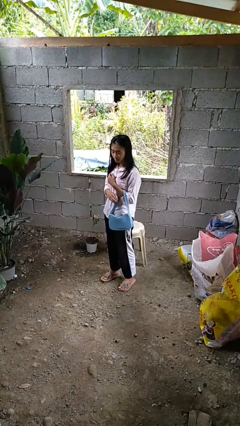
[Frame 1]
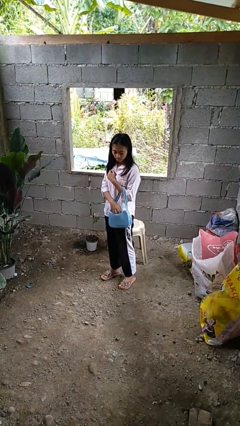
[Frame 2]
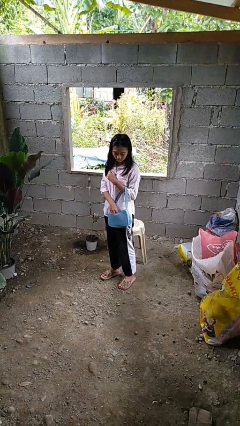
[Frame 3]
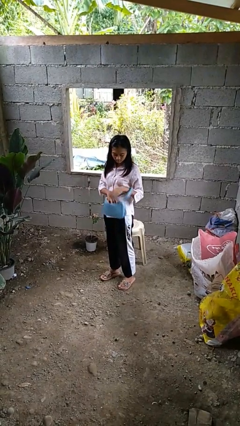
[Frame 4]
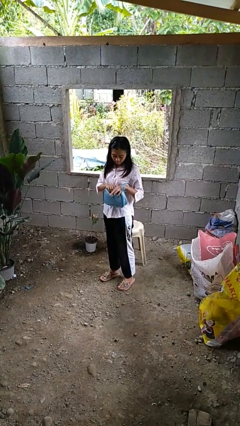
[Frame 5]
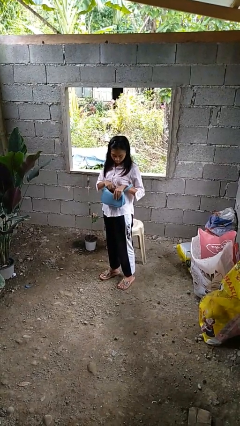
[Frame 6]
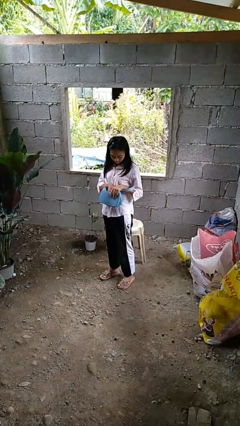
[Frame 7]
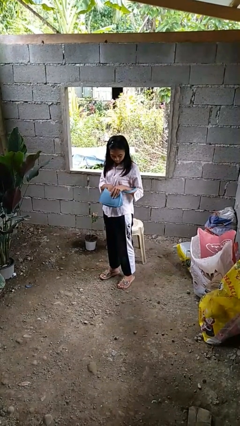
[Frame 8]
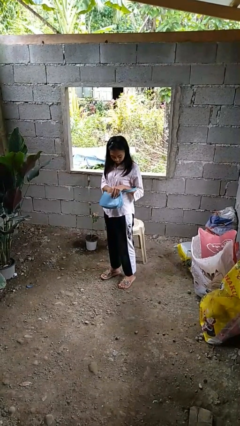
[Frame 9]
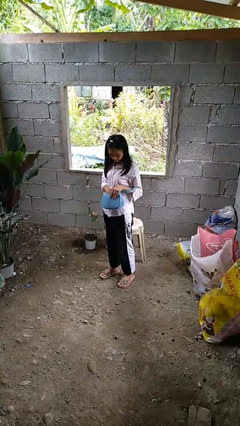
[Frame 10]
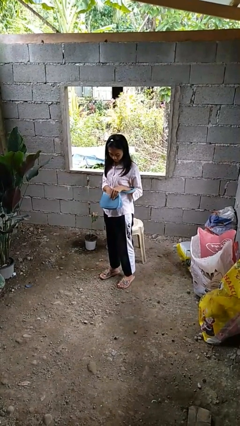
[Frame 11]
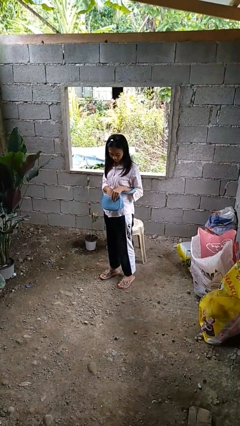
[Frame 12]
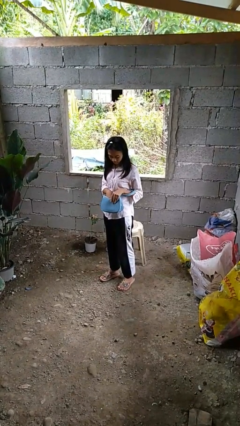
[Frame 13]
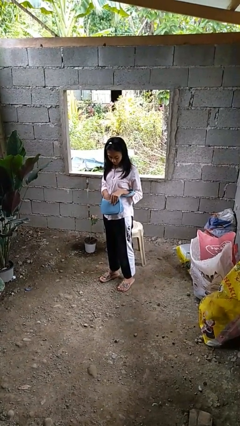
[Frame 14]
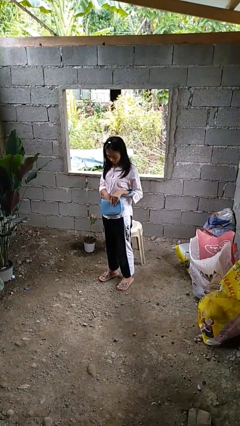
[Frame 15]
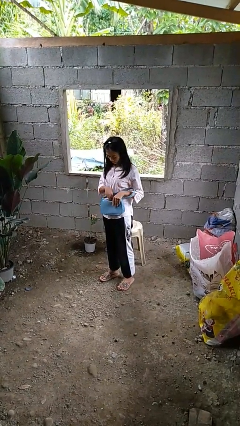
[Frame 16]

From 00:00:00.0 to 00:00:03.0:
person searches in purse

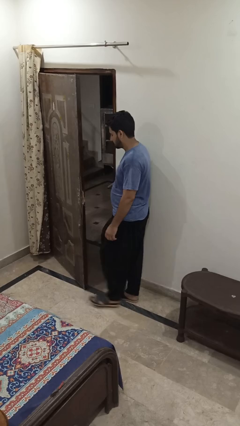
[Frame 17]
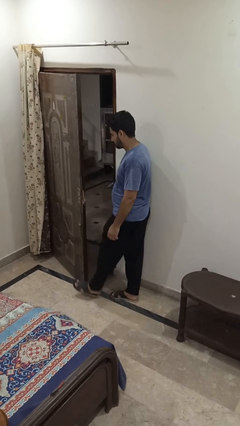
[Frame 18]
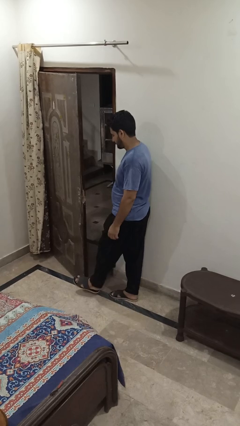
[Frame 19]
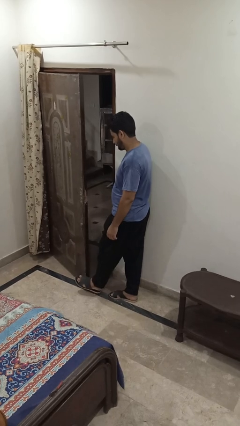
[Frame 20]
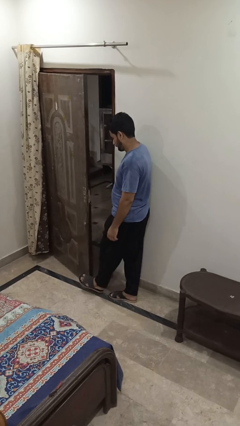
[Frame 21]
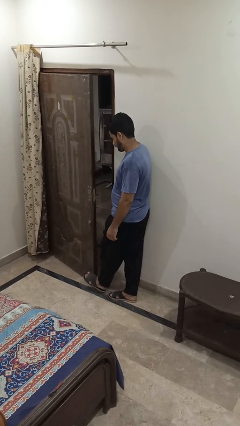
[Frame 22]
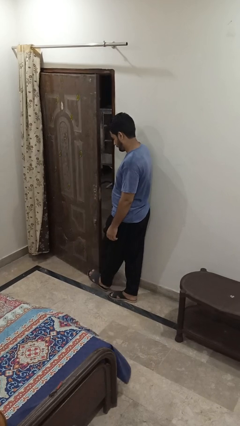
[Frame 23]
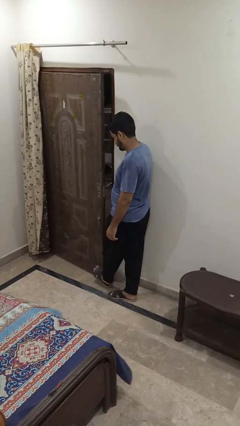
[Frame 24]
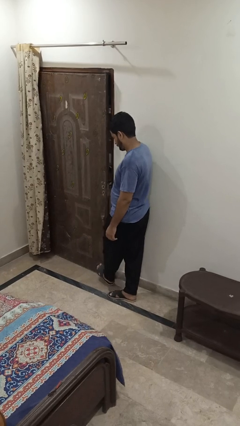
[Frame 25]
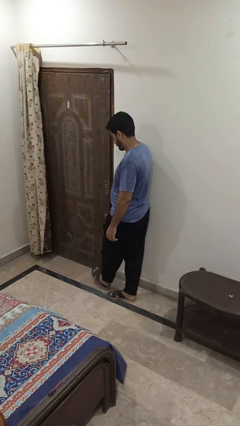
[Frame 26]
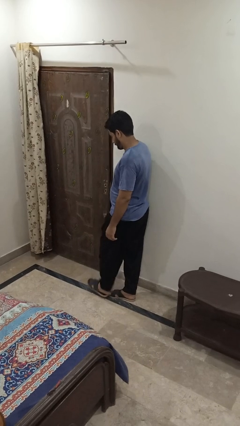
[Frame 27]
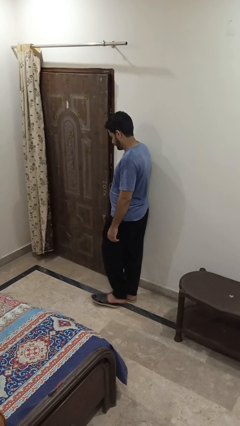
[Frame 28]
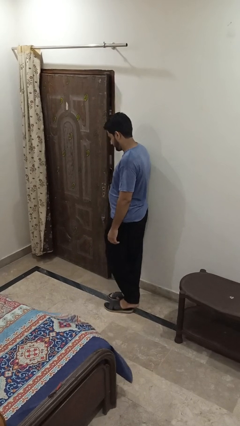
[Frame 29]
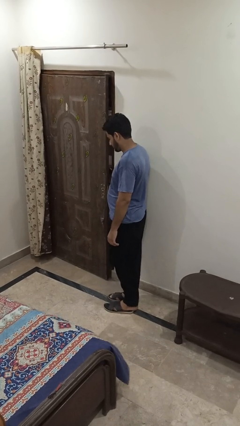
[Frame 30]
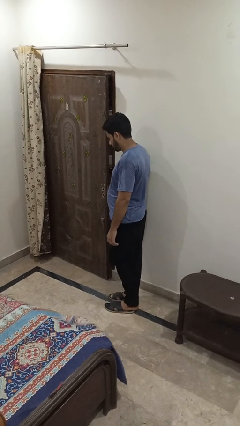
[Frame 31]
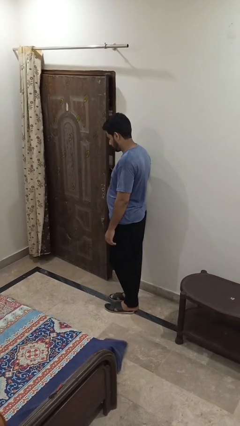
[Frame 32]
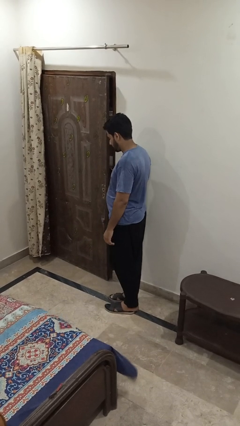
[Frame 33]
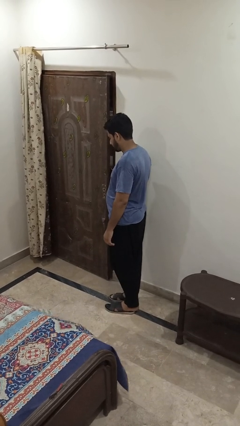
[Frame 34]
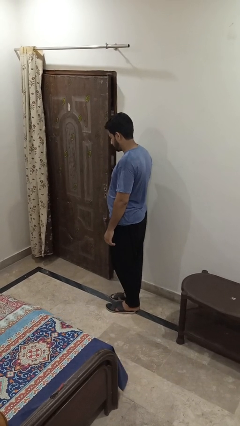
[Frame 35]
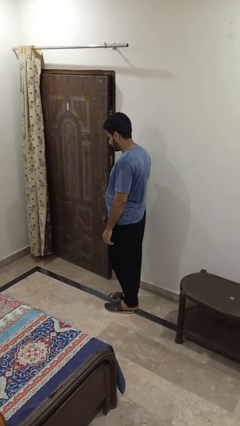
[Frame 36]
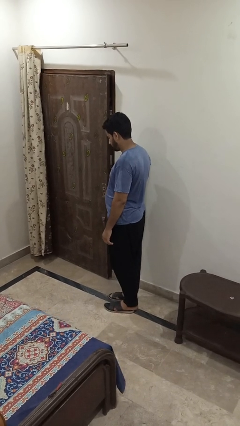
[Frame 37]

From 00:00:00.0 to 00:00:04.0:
person closes door with foot

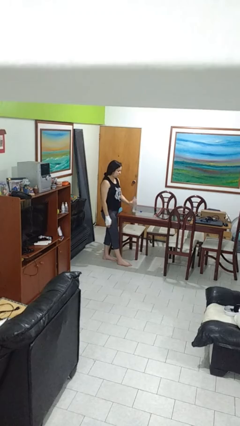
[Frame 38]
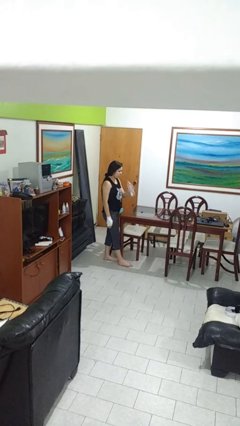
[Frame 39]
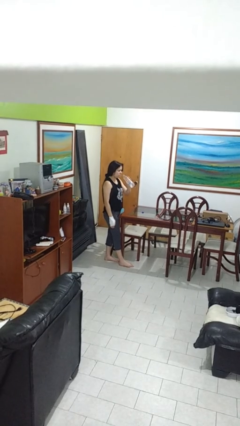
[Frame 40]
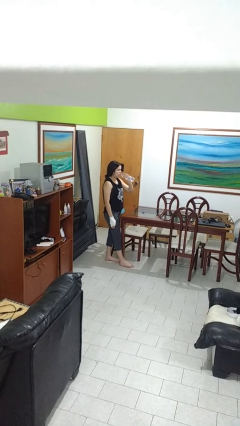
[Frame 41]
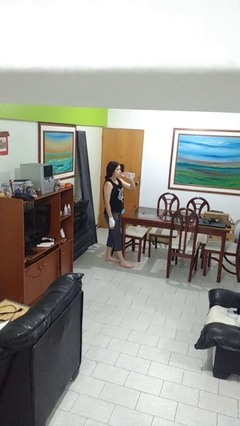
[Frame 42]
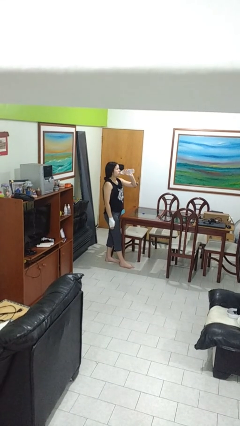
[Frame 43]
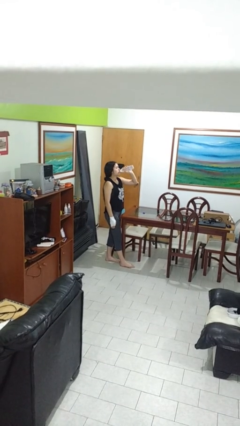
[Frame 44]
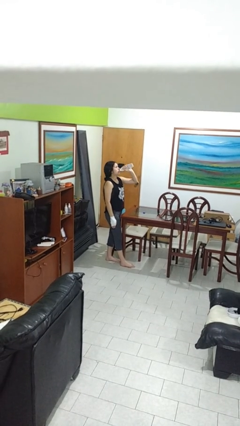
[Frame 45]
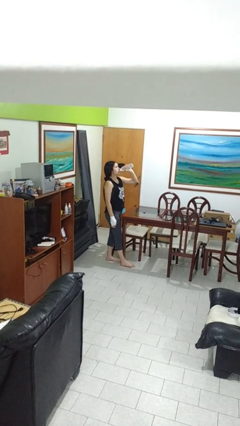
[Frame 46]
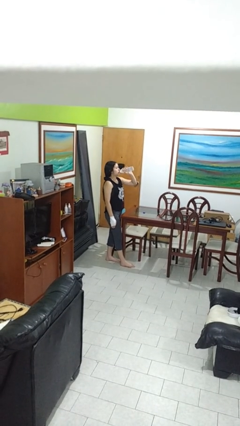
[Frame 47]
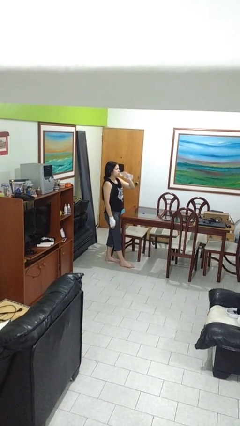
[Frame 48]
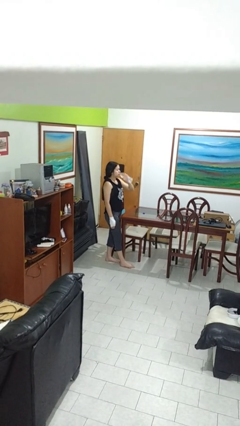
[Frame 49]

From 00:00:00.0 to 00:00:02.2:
person drinks from bottle

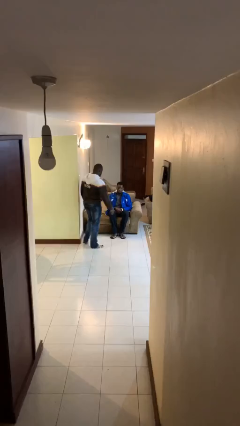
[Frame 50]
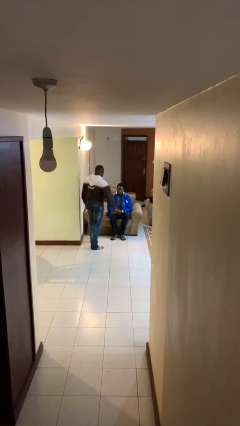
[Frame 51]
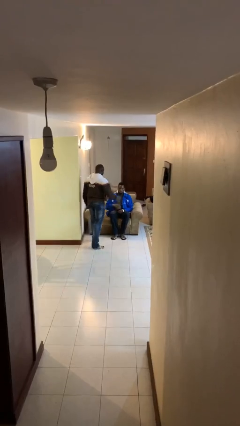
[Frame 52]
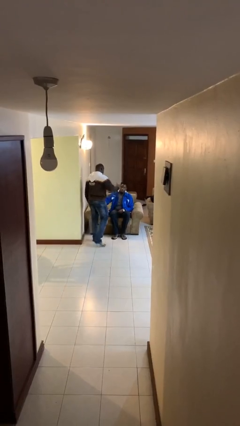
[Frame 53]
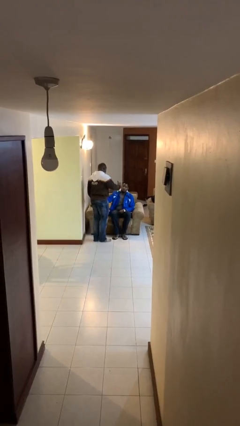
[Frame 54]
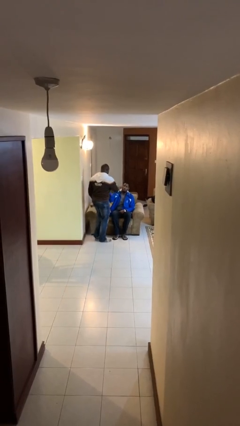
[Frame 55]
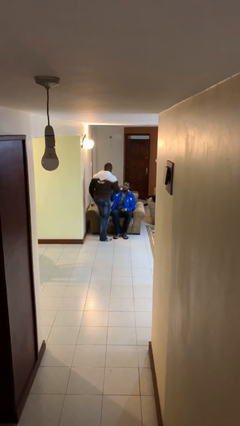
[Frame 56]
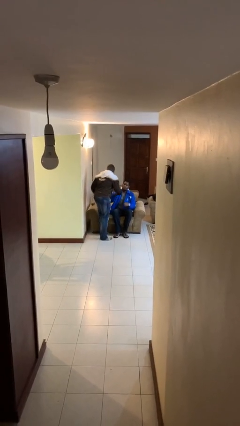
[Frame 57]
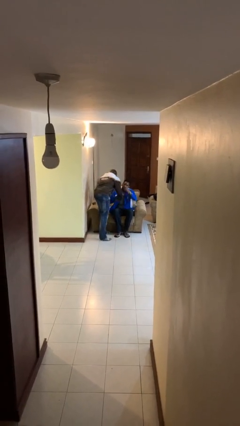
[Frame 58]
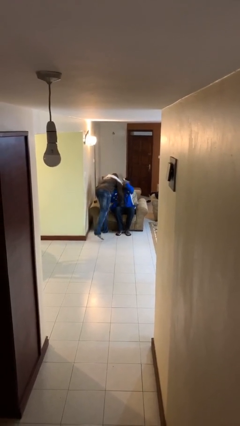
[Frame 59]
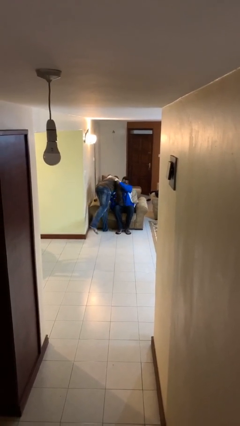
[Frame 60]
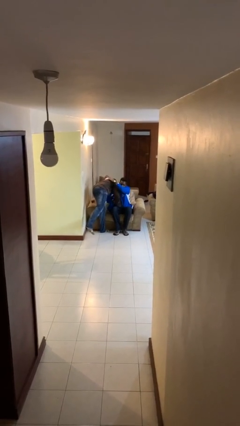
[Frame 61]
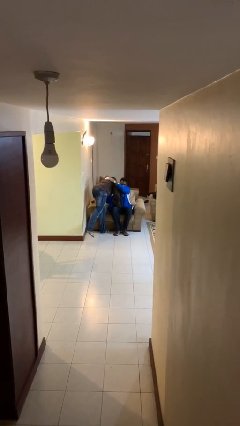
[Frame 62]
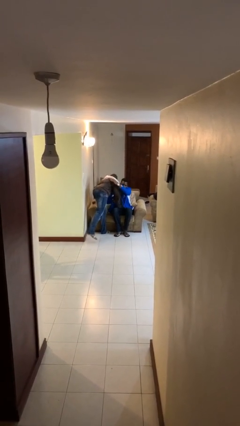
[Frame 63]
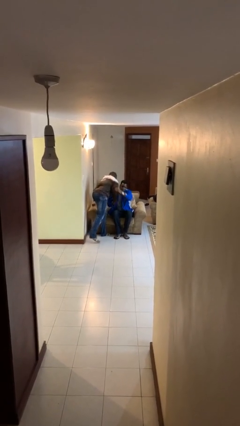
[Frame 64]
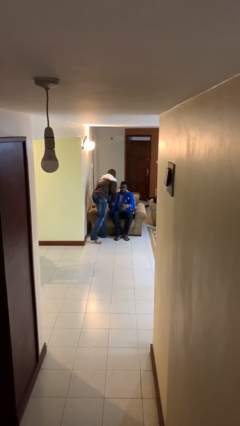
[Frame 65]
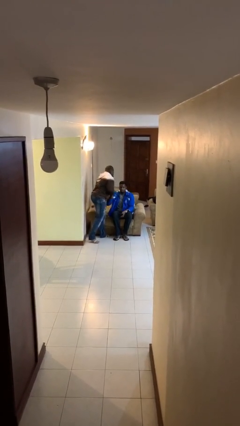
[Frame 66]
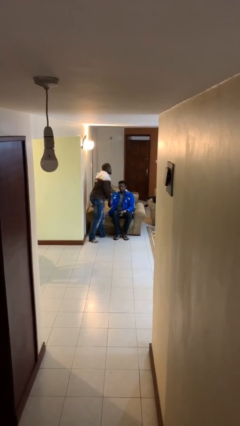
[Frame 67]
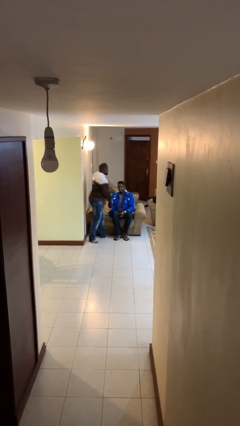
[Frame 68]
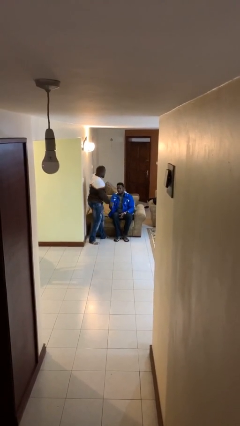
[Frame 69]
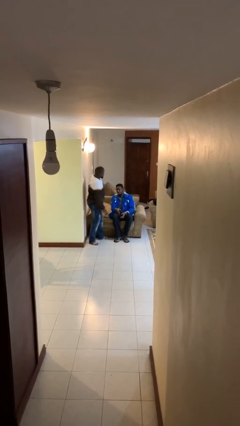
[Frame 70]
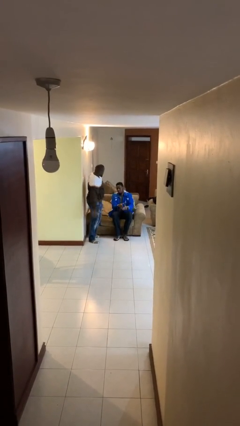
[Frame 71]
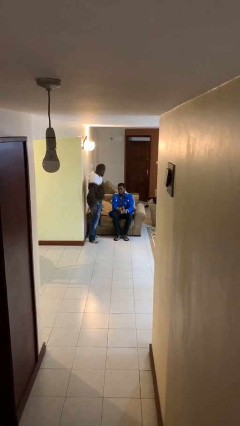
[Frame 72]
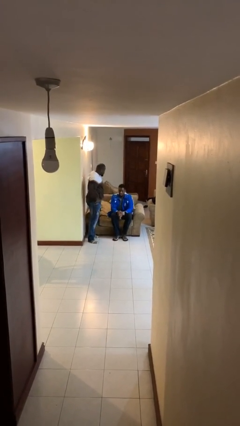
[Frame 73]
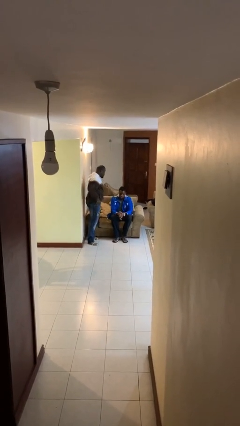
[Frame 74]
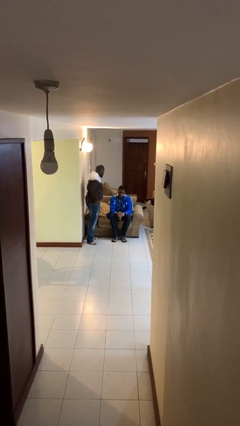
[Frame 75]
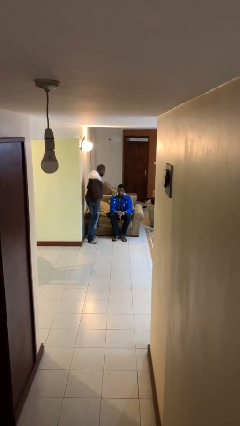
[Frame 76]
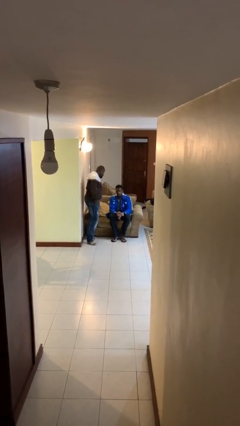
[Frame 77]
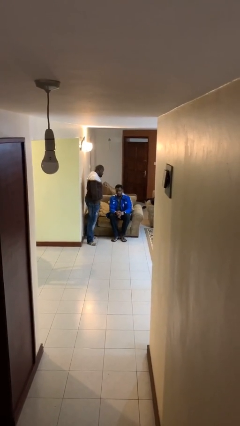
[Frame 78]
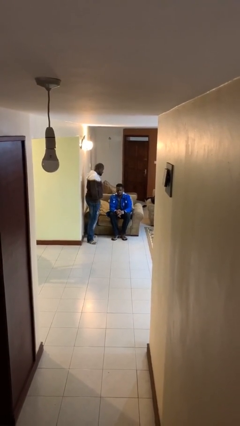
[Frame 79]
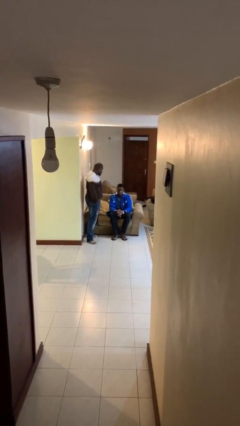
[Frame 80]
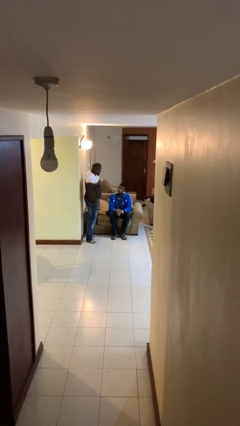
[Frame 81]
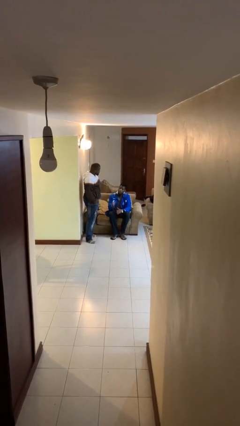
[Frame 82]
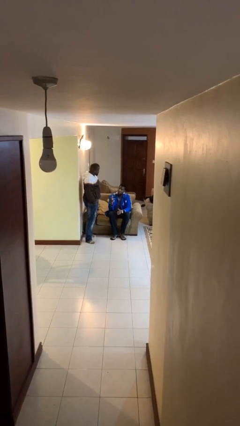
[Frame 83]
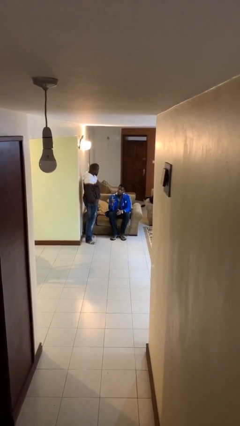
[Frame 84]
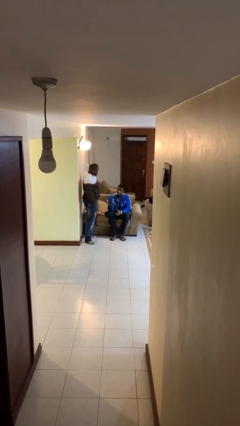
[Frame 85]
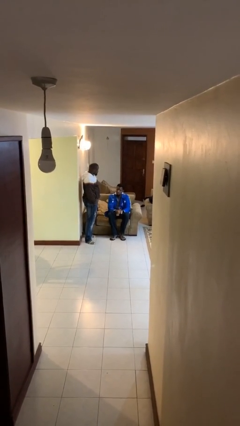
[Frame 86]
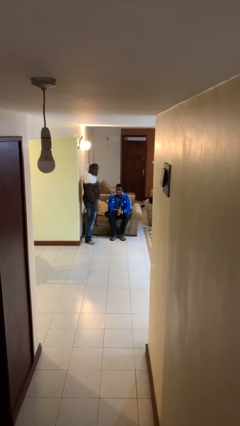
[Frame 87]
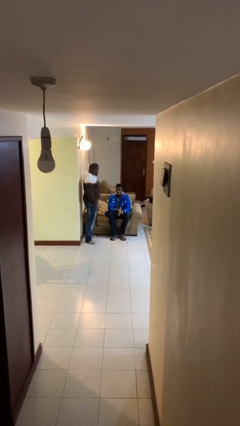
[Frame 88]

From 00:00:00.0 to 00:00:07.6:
person embraces person

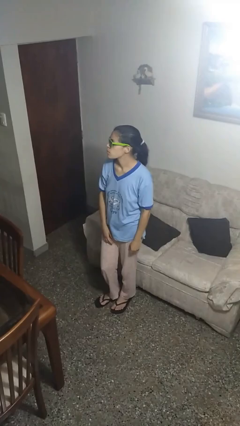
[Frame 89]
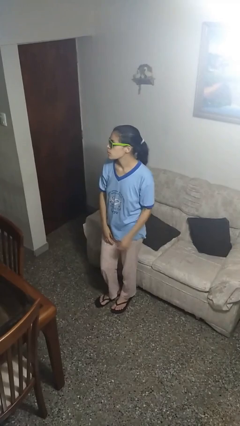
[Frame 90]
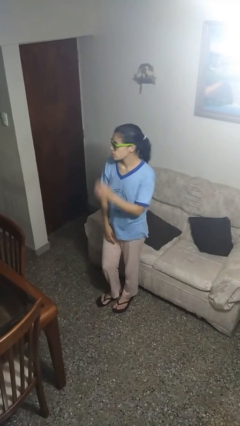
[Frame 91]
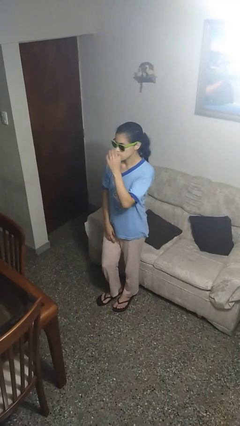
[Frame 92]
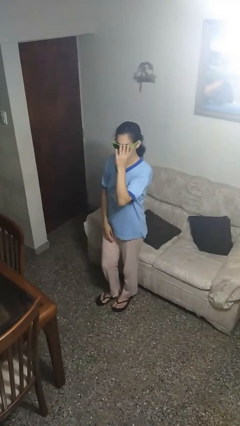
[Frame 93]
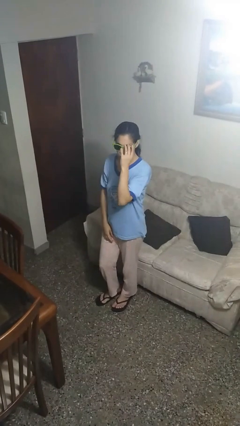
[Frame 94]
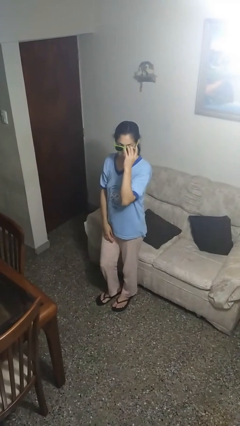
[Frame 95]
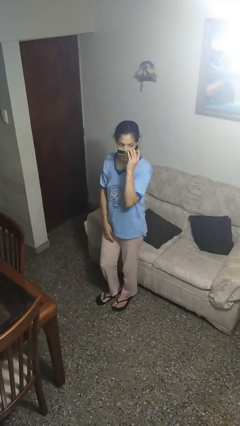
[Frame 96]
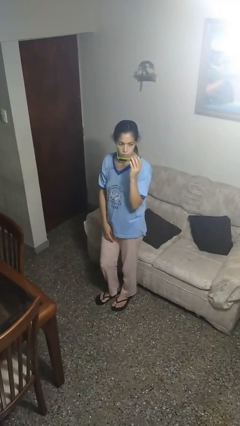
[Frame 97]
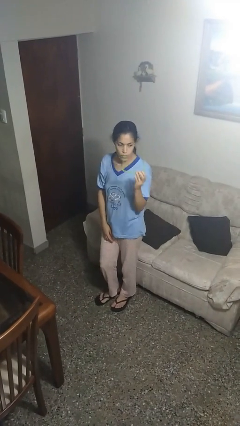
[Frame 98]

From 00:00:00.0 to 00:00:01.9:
person takes off sunglasses
